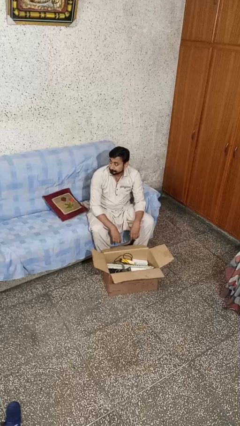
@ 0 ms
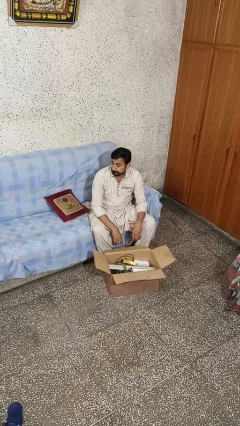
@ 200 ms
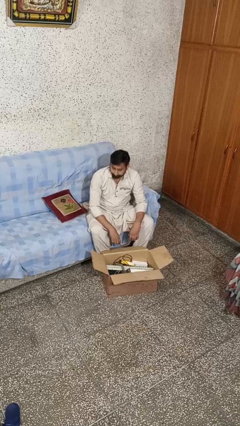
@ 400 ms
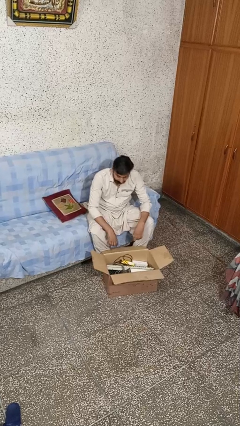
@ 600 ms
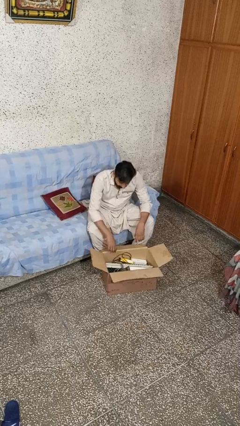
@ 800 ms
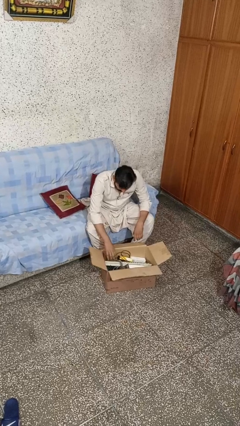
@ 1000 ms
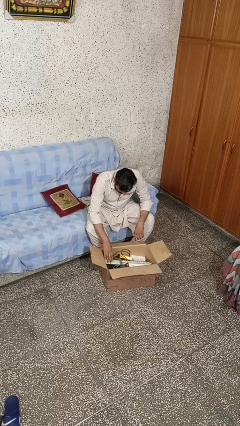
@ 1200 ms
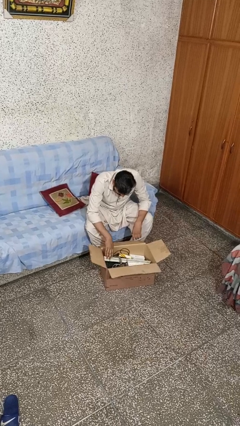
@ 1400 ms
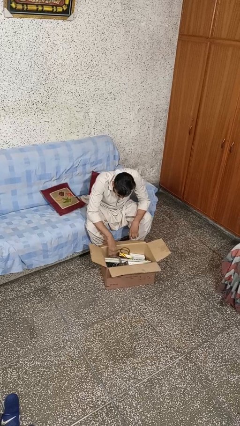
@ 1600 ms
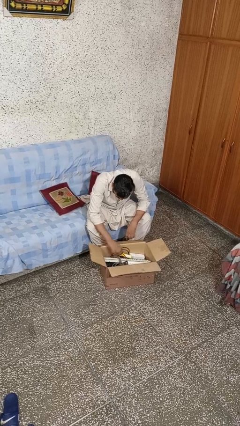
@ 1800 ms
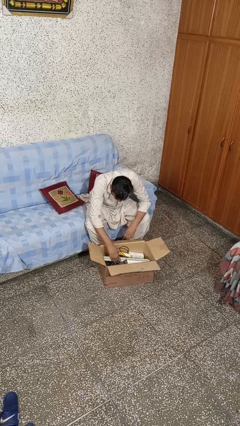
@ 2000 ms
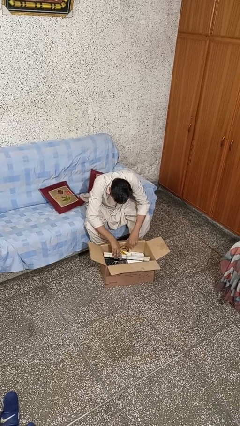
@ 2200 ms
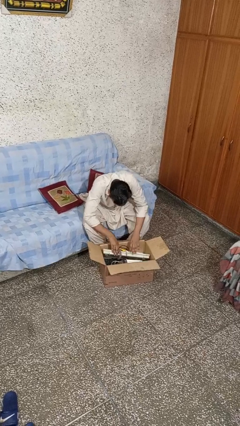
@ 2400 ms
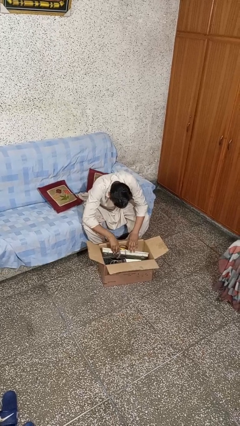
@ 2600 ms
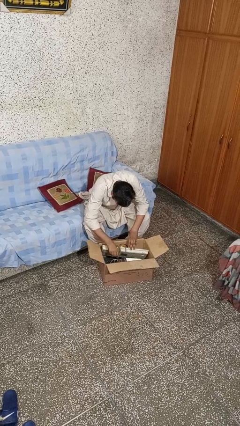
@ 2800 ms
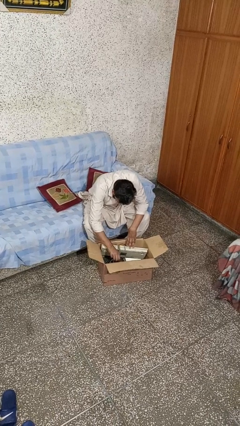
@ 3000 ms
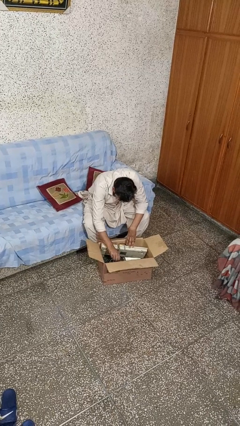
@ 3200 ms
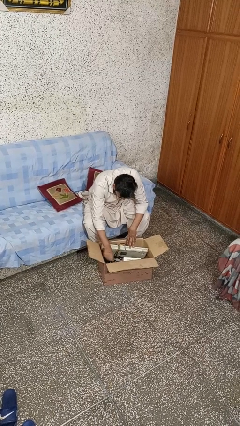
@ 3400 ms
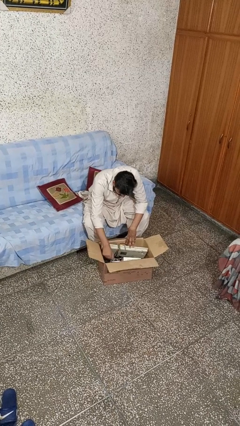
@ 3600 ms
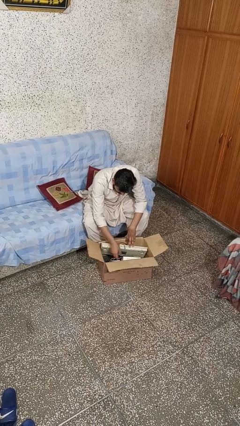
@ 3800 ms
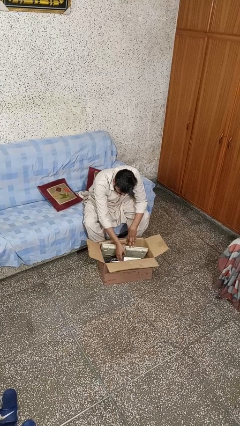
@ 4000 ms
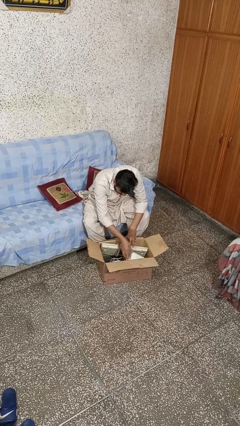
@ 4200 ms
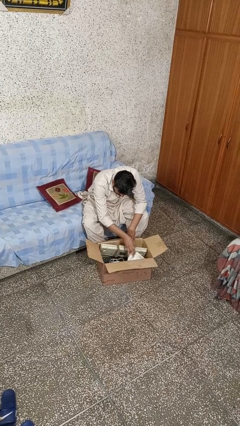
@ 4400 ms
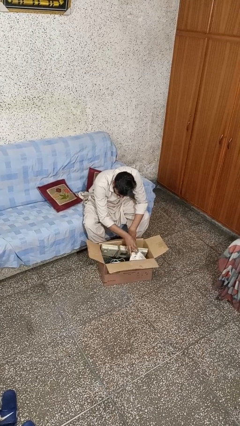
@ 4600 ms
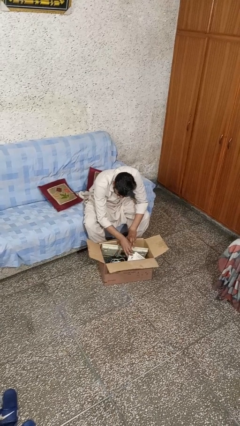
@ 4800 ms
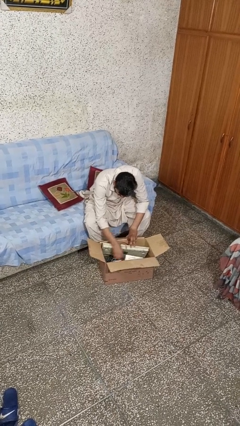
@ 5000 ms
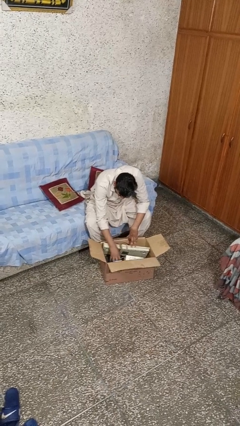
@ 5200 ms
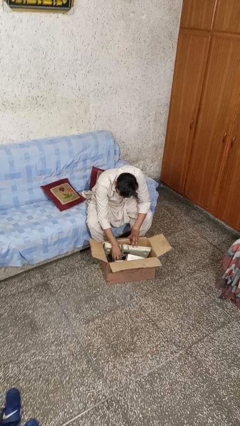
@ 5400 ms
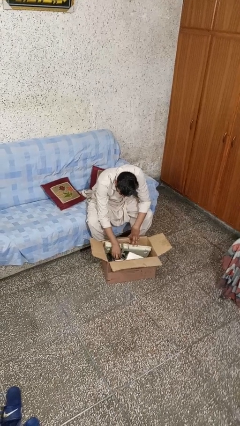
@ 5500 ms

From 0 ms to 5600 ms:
person searches in box

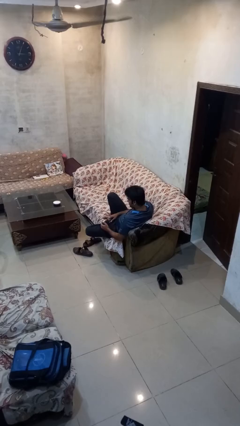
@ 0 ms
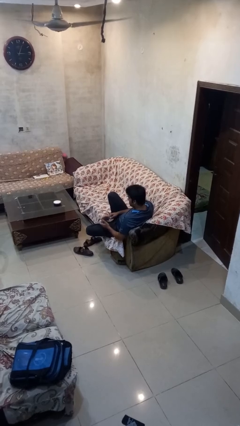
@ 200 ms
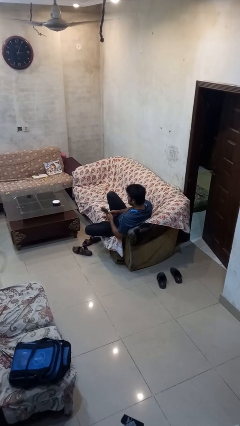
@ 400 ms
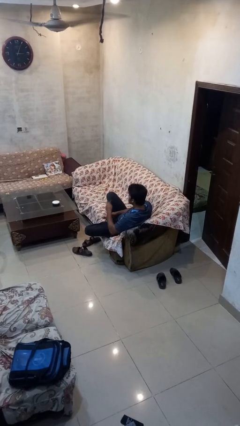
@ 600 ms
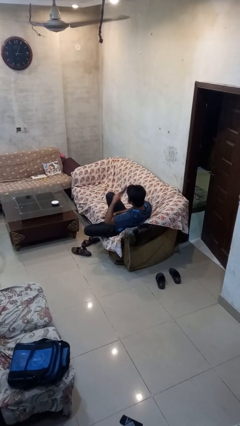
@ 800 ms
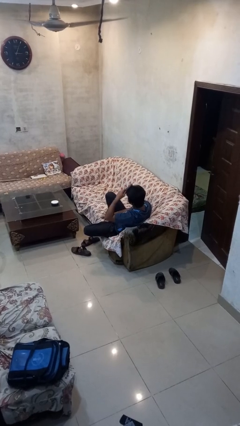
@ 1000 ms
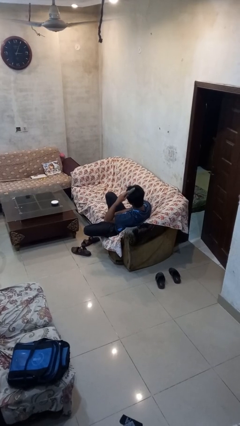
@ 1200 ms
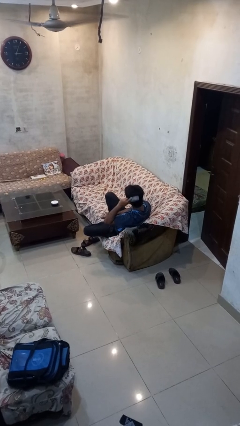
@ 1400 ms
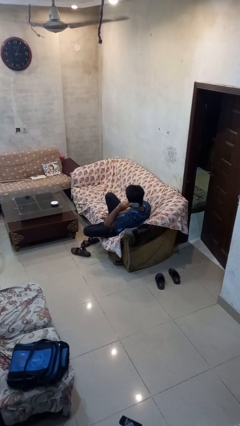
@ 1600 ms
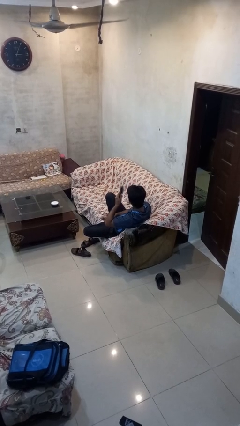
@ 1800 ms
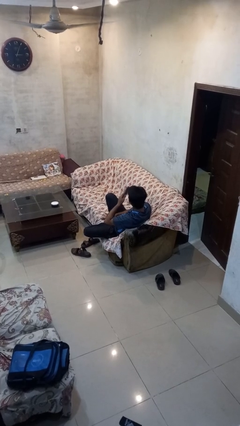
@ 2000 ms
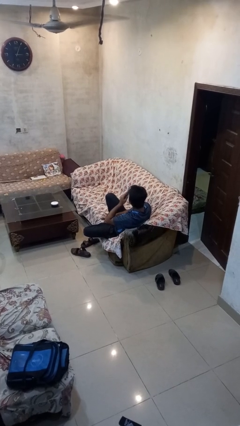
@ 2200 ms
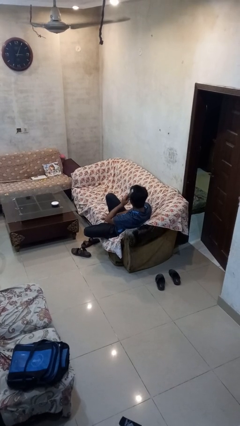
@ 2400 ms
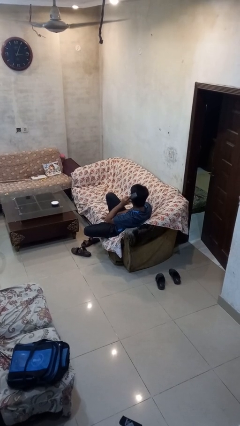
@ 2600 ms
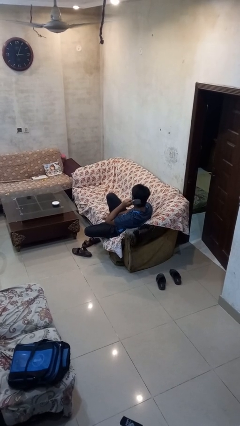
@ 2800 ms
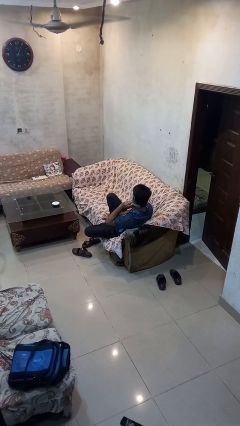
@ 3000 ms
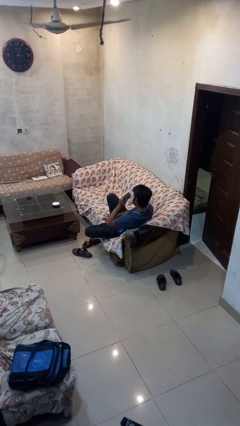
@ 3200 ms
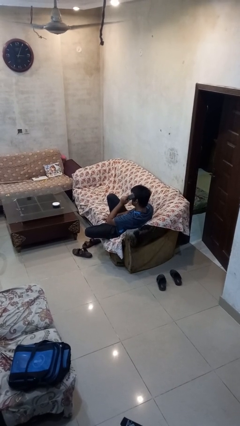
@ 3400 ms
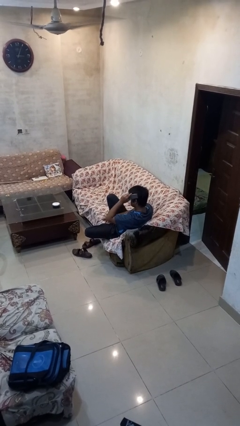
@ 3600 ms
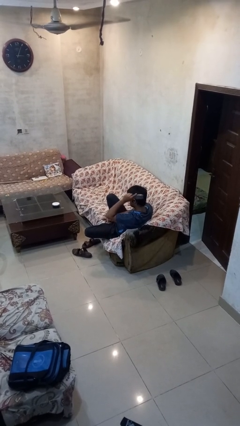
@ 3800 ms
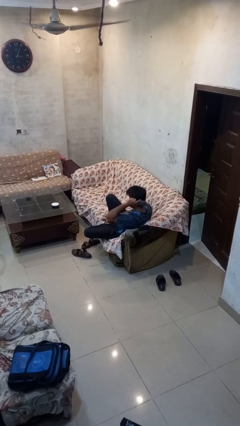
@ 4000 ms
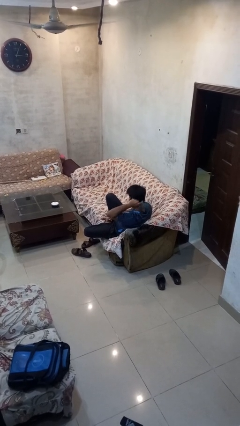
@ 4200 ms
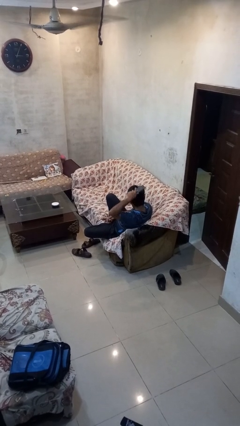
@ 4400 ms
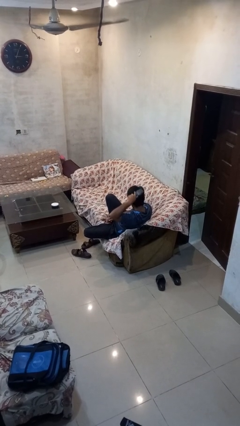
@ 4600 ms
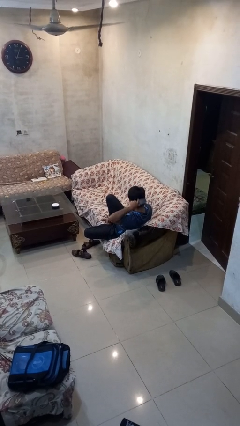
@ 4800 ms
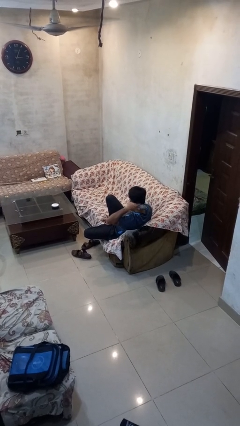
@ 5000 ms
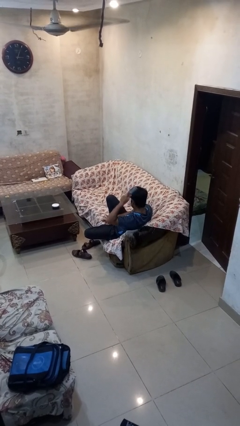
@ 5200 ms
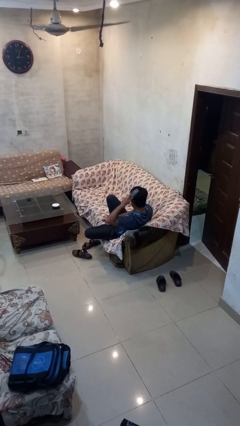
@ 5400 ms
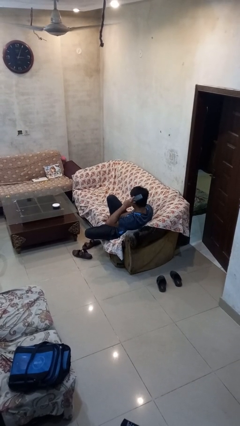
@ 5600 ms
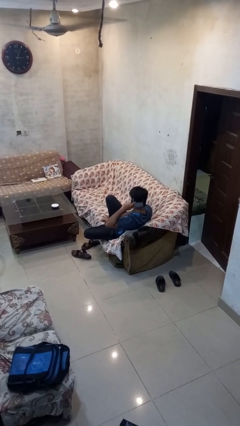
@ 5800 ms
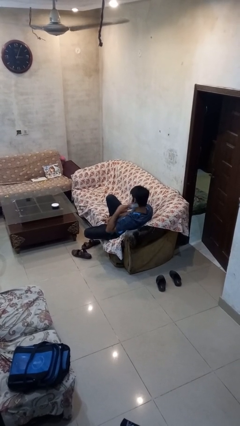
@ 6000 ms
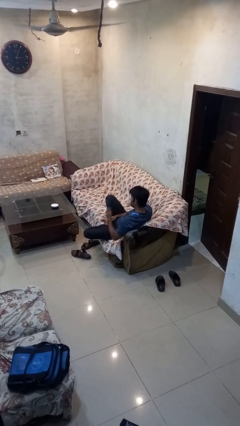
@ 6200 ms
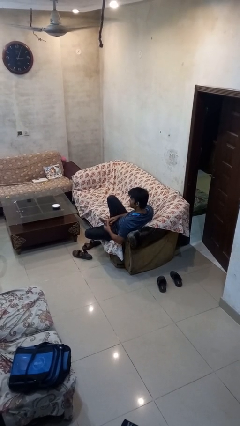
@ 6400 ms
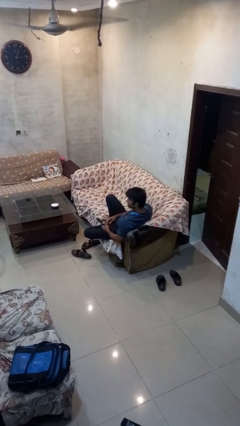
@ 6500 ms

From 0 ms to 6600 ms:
person brushes hair

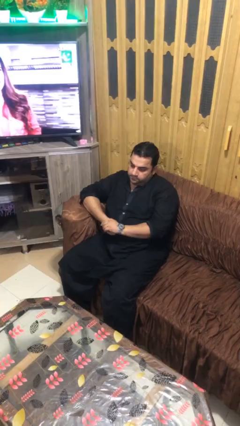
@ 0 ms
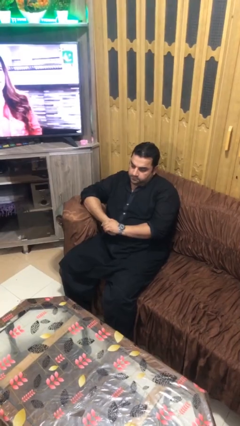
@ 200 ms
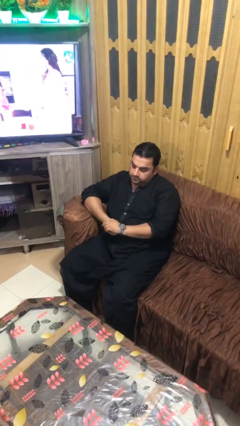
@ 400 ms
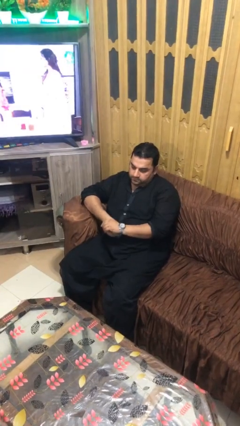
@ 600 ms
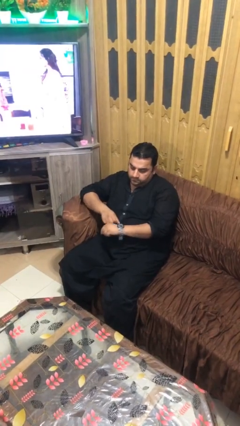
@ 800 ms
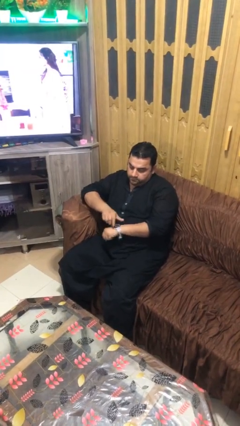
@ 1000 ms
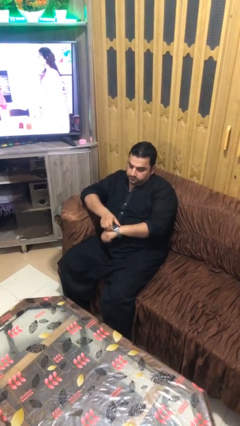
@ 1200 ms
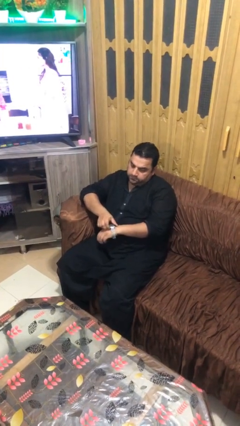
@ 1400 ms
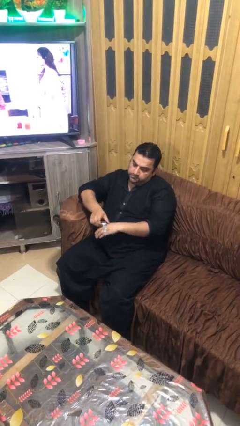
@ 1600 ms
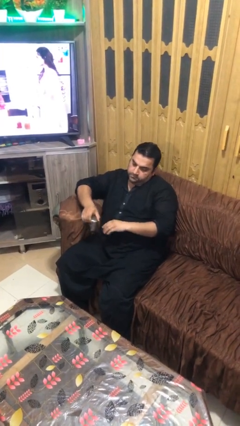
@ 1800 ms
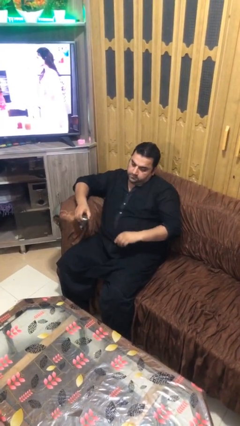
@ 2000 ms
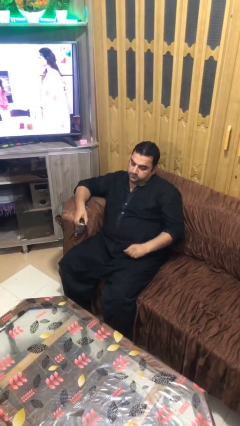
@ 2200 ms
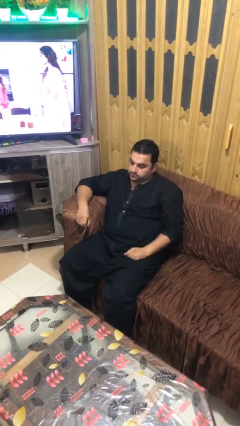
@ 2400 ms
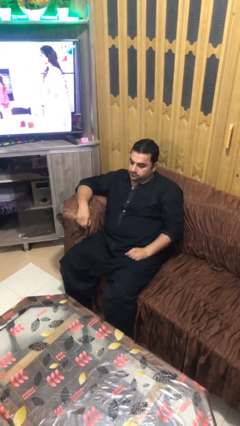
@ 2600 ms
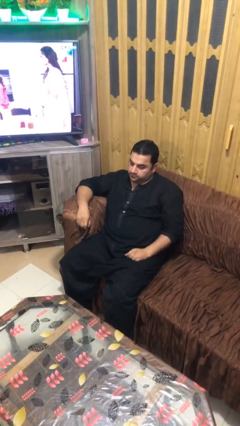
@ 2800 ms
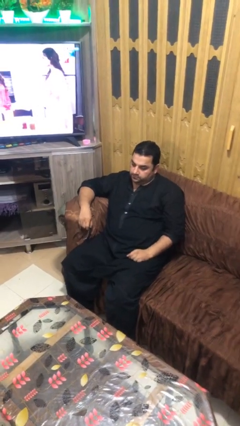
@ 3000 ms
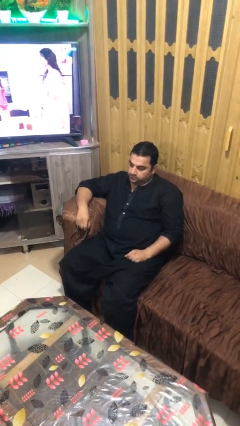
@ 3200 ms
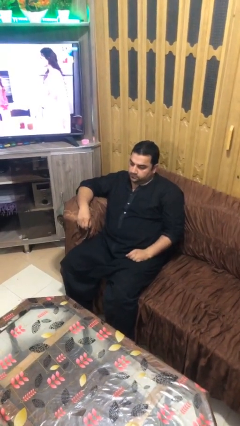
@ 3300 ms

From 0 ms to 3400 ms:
person takes off wristwatch

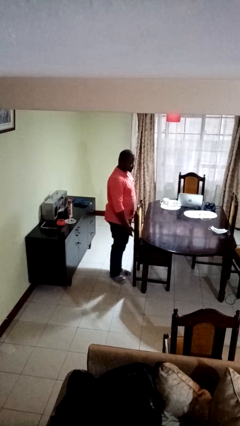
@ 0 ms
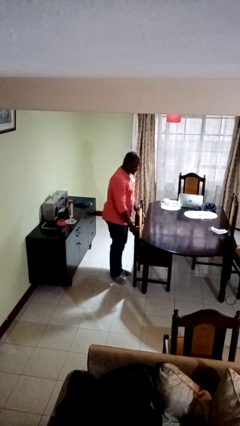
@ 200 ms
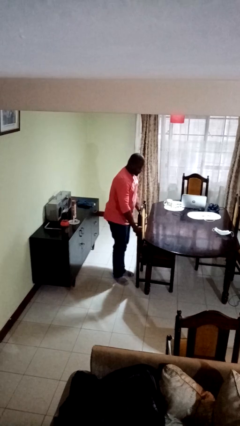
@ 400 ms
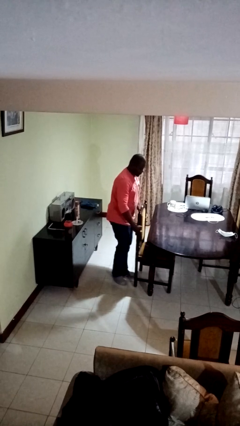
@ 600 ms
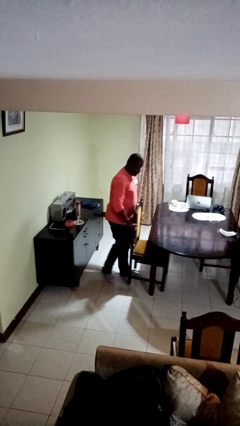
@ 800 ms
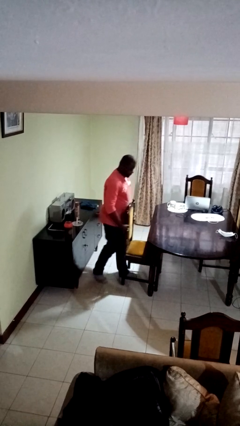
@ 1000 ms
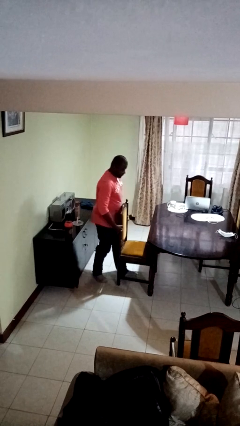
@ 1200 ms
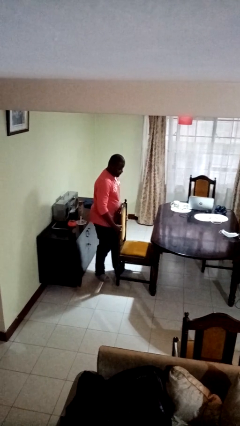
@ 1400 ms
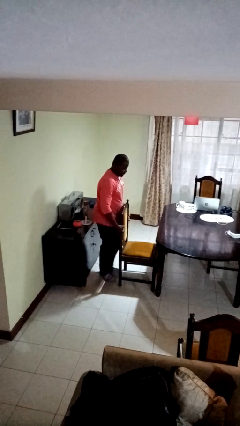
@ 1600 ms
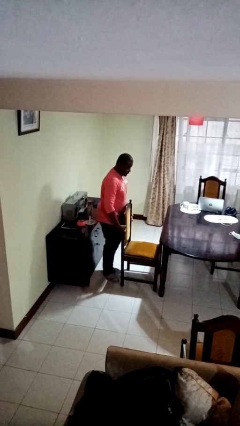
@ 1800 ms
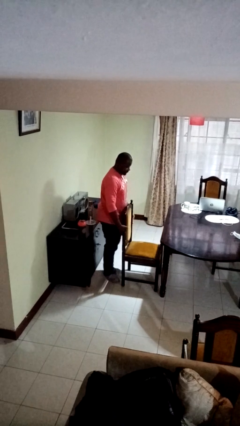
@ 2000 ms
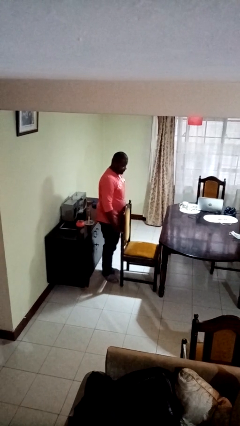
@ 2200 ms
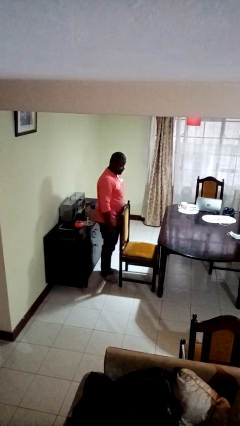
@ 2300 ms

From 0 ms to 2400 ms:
person pulls out chair
